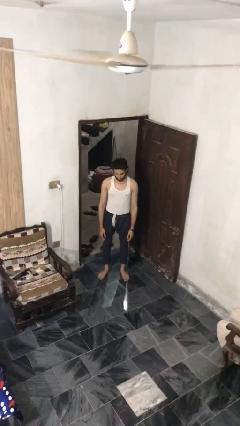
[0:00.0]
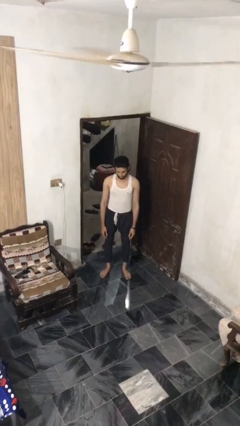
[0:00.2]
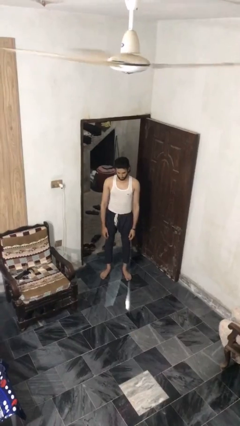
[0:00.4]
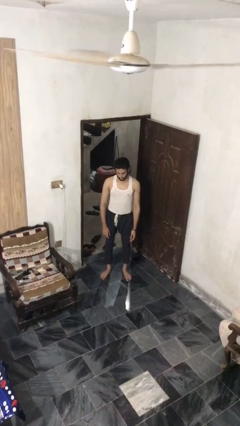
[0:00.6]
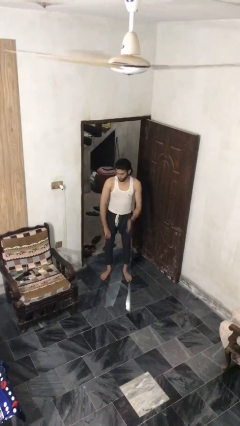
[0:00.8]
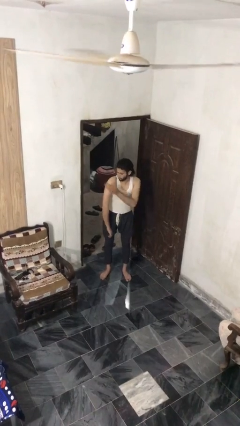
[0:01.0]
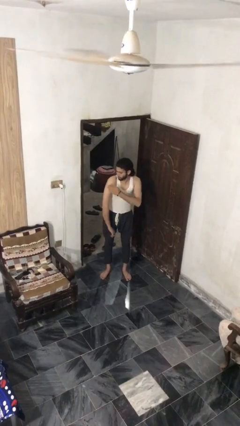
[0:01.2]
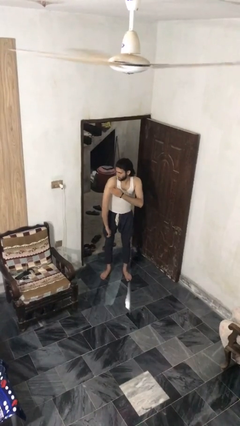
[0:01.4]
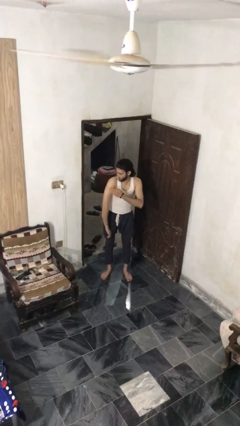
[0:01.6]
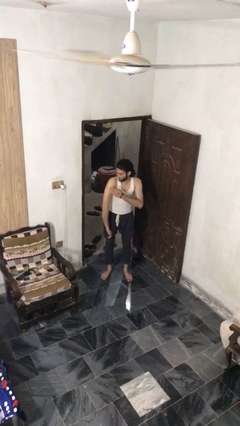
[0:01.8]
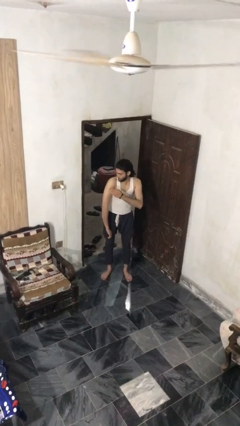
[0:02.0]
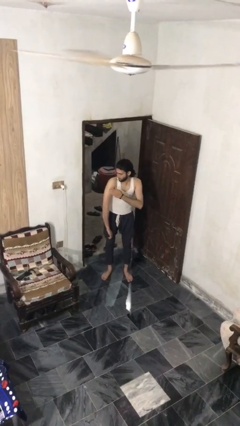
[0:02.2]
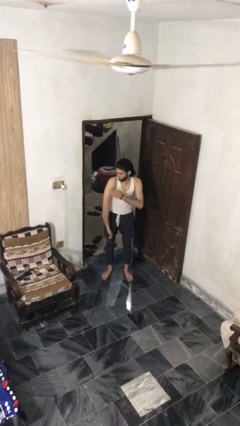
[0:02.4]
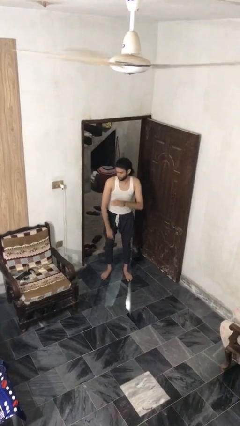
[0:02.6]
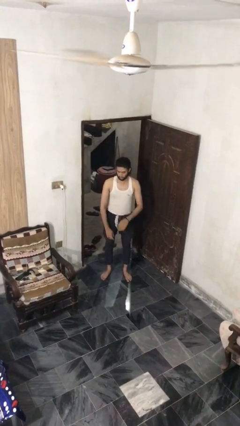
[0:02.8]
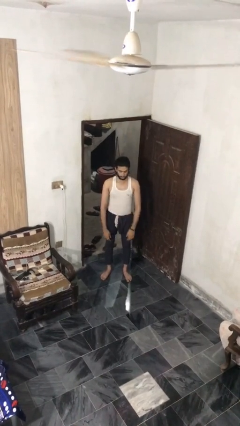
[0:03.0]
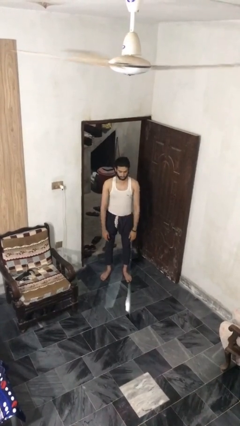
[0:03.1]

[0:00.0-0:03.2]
person swats bug

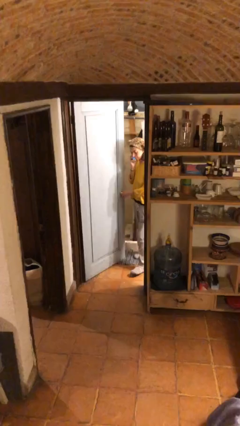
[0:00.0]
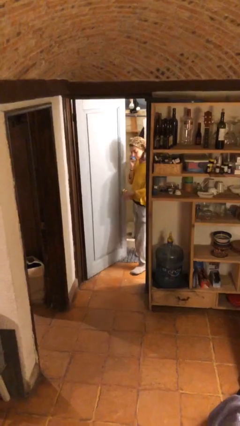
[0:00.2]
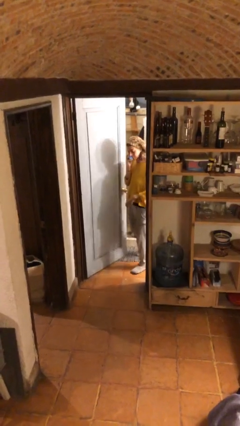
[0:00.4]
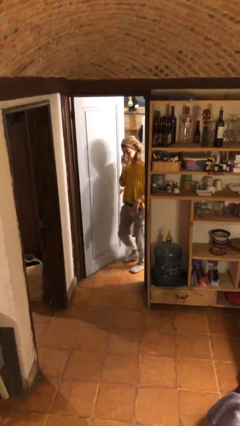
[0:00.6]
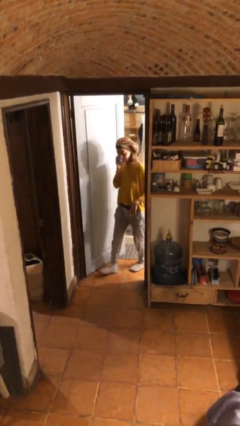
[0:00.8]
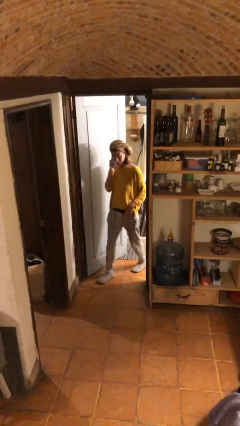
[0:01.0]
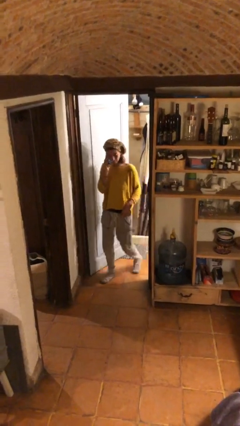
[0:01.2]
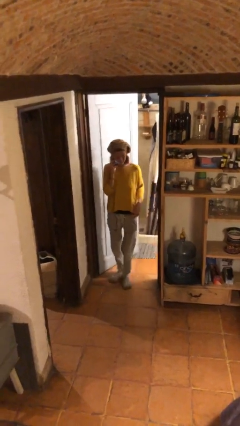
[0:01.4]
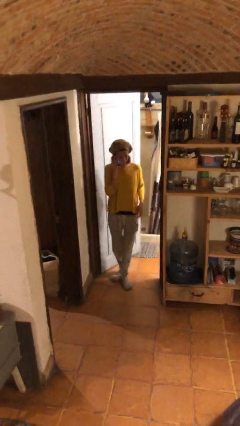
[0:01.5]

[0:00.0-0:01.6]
person enters scene through structure

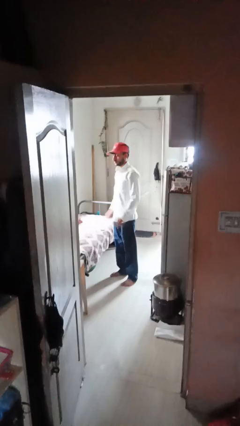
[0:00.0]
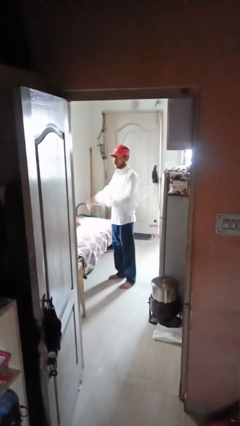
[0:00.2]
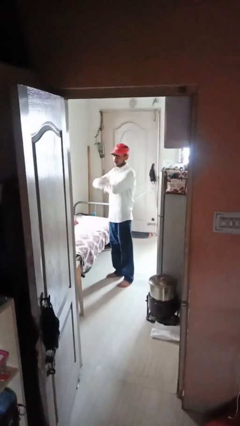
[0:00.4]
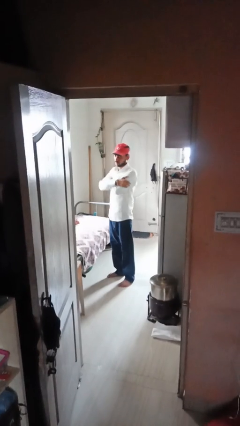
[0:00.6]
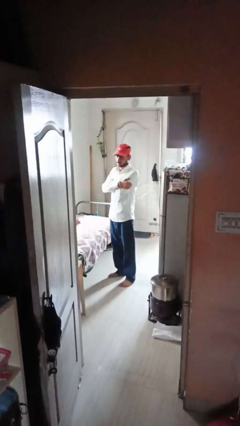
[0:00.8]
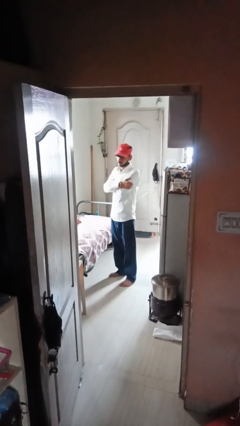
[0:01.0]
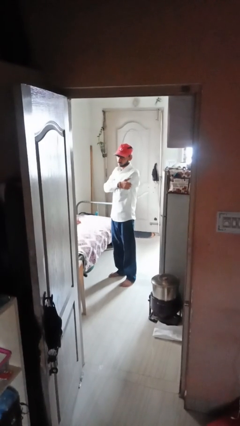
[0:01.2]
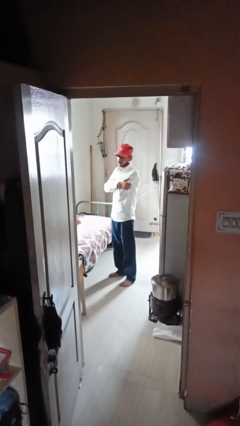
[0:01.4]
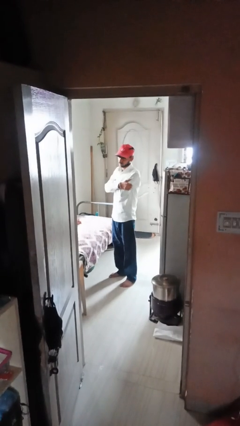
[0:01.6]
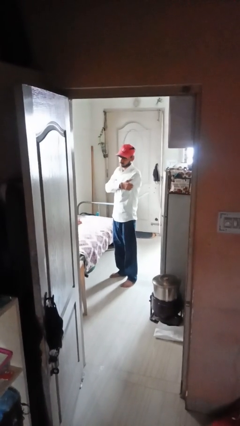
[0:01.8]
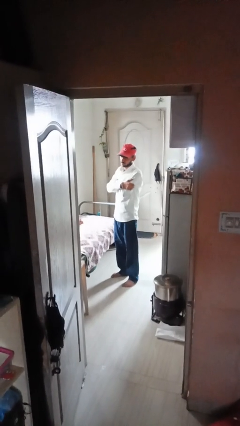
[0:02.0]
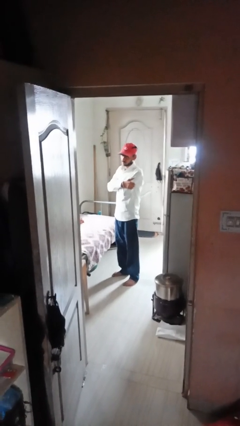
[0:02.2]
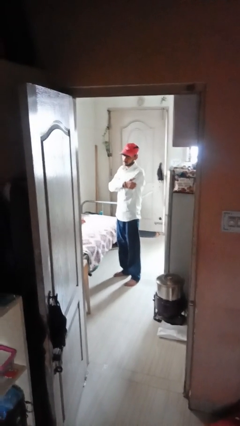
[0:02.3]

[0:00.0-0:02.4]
person crosses arms

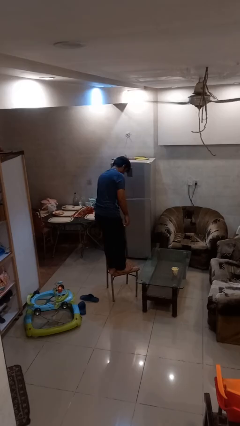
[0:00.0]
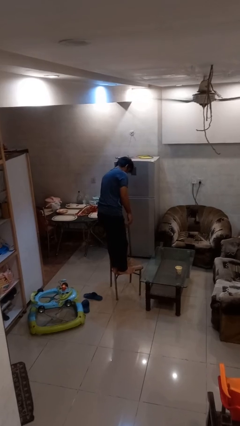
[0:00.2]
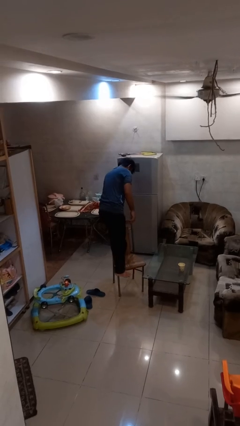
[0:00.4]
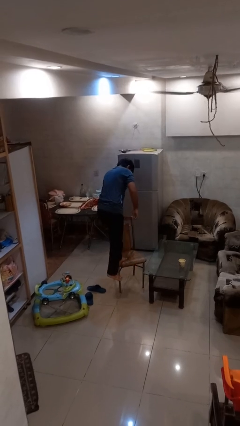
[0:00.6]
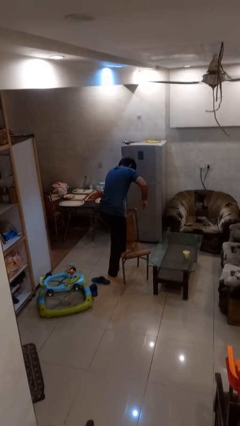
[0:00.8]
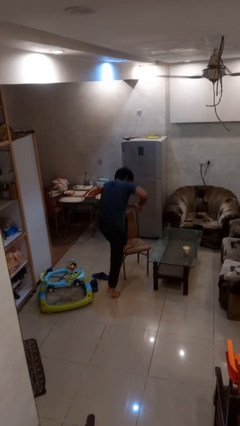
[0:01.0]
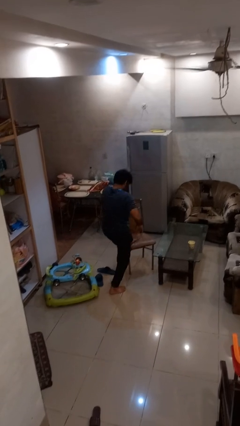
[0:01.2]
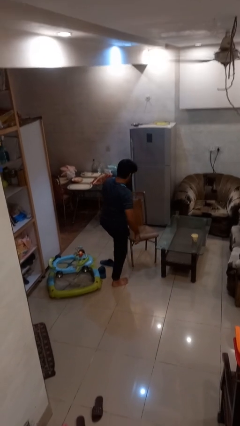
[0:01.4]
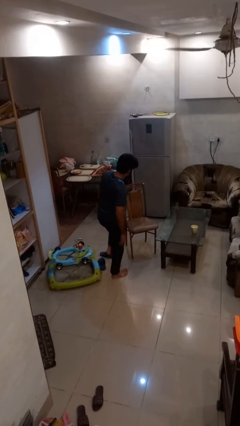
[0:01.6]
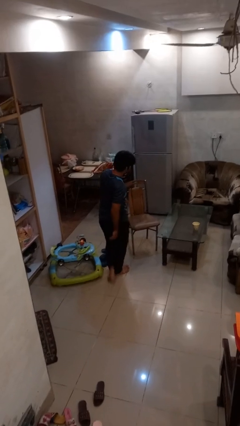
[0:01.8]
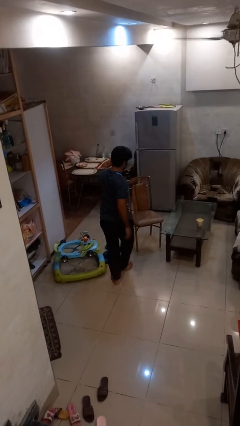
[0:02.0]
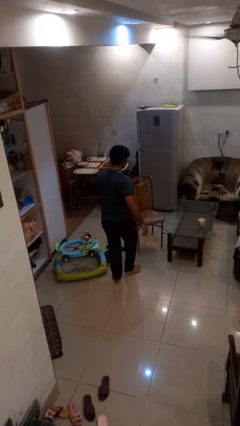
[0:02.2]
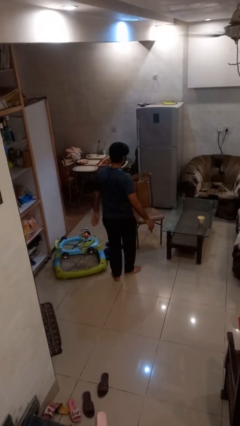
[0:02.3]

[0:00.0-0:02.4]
person climbs off chair

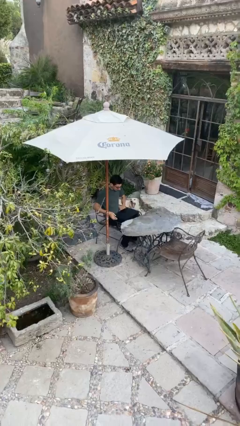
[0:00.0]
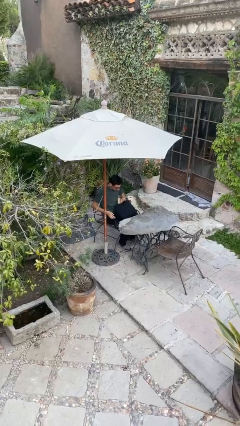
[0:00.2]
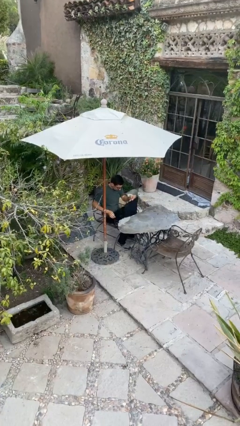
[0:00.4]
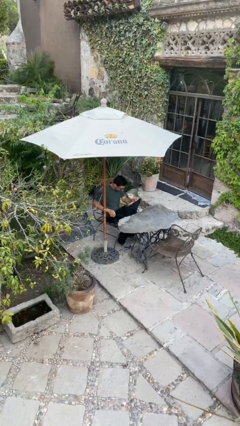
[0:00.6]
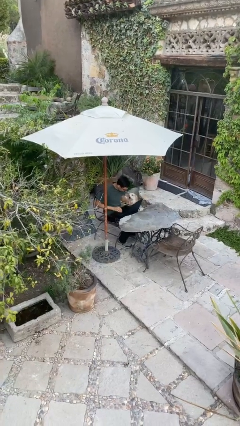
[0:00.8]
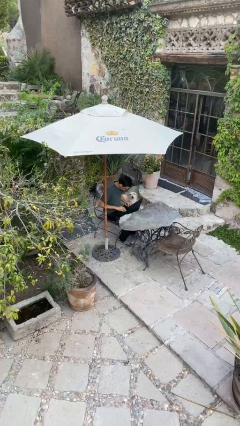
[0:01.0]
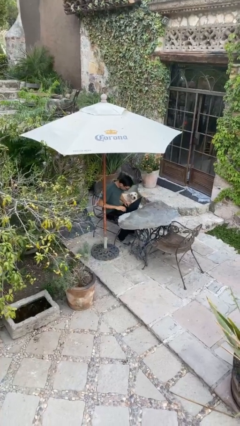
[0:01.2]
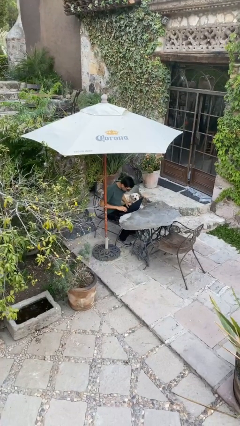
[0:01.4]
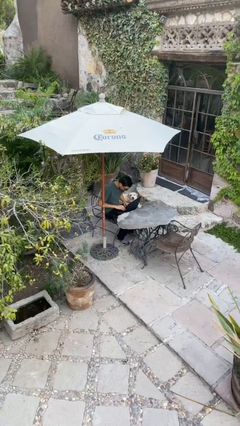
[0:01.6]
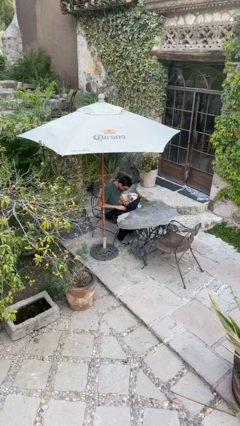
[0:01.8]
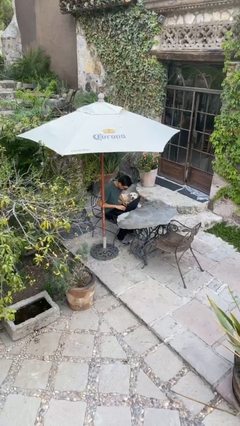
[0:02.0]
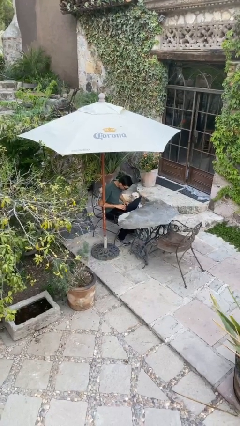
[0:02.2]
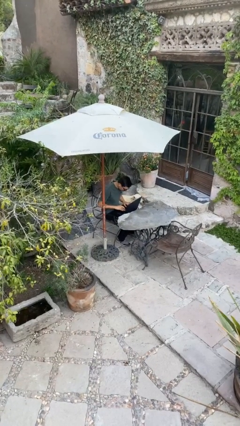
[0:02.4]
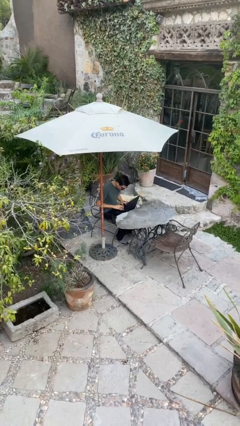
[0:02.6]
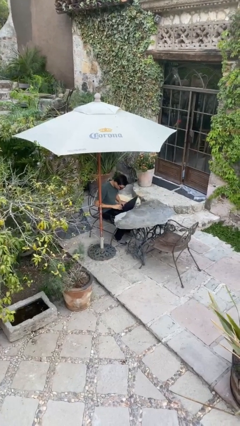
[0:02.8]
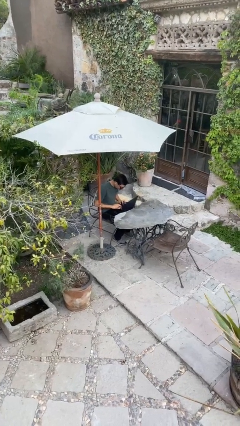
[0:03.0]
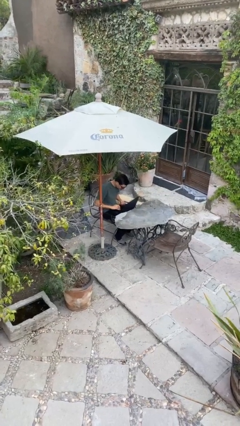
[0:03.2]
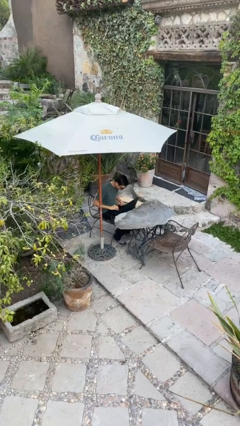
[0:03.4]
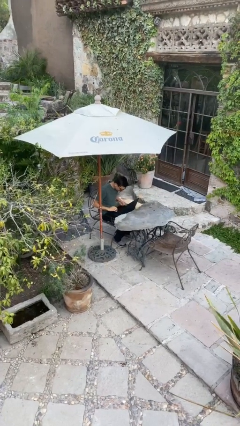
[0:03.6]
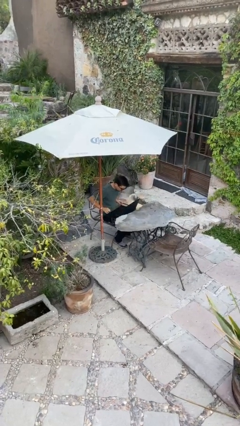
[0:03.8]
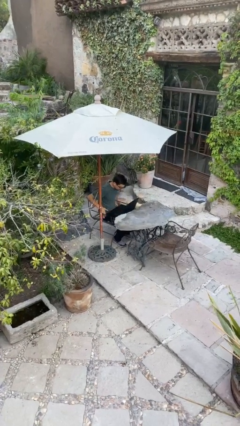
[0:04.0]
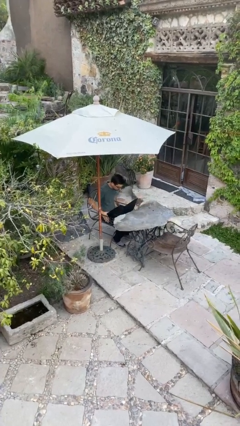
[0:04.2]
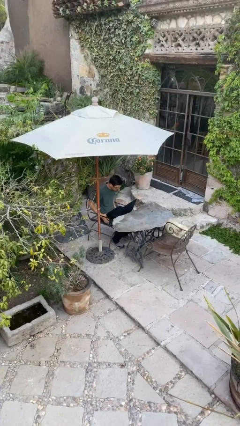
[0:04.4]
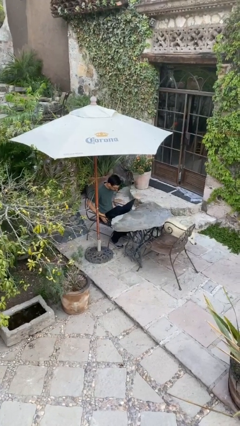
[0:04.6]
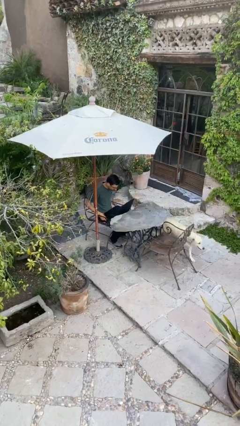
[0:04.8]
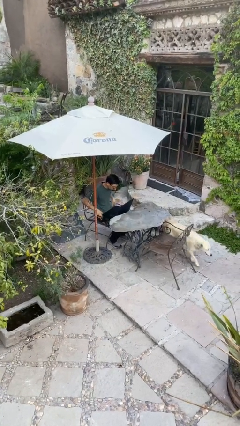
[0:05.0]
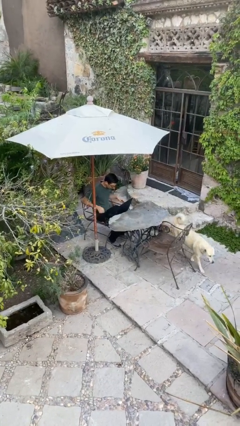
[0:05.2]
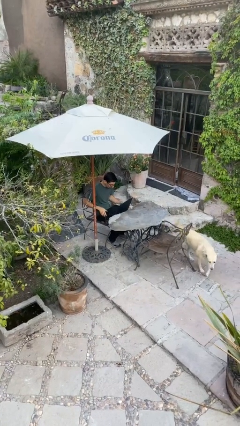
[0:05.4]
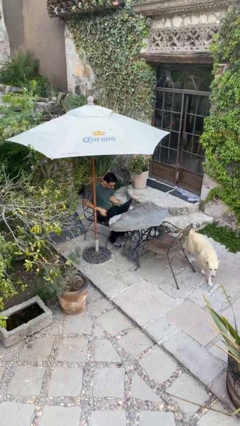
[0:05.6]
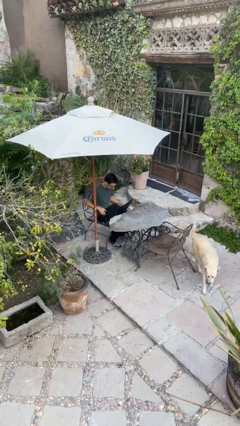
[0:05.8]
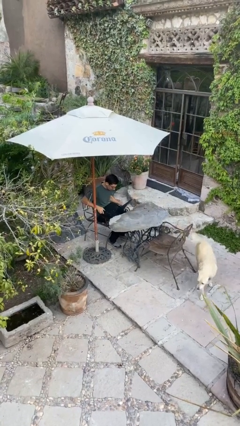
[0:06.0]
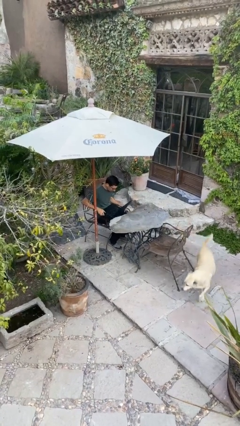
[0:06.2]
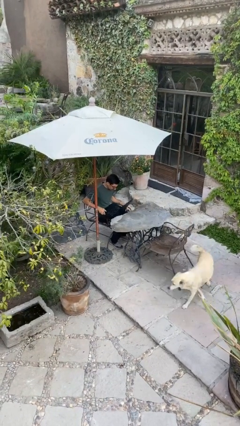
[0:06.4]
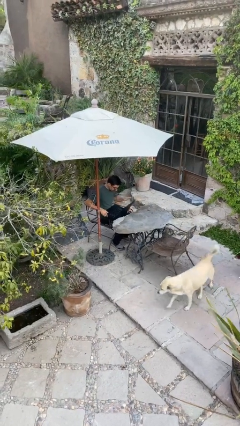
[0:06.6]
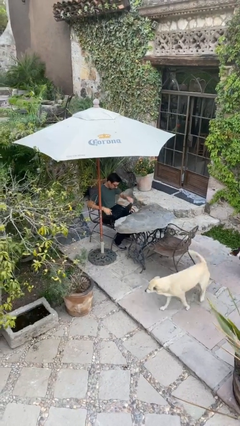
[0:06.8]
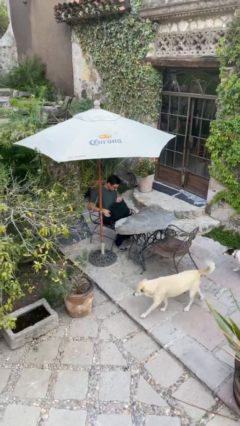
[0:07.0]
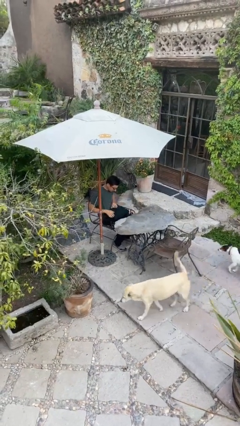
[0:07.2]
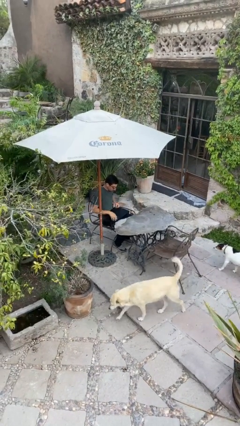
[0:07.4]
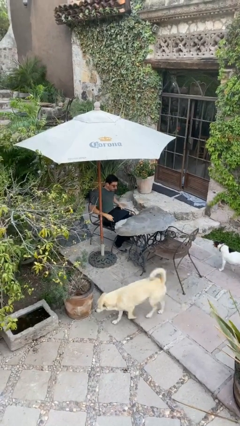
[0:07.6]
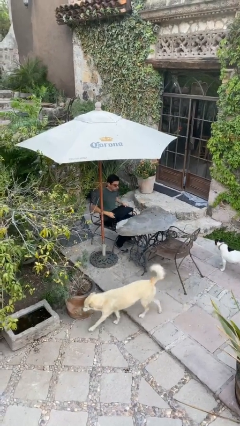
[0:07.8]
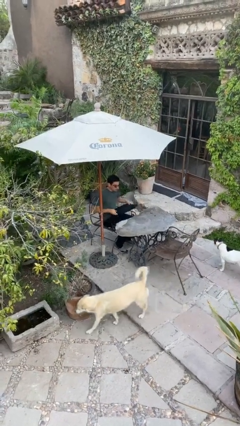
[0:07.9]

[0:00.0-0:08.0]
person interacts with laptop

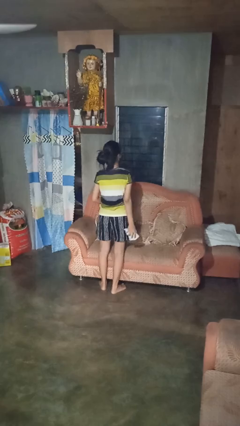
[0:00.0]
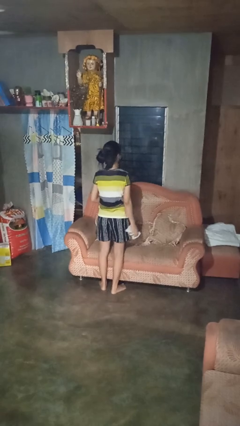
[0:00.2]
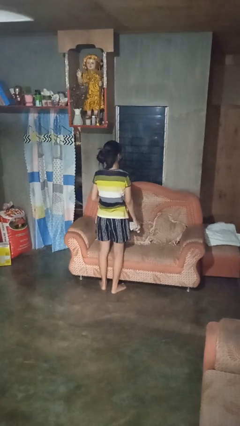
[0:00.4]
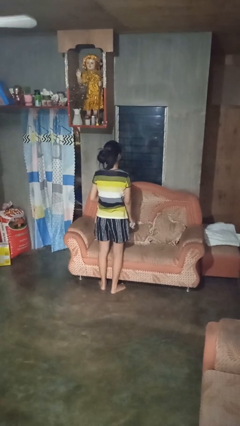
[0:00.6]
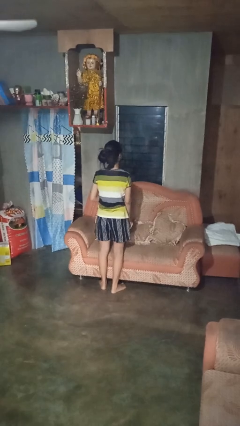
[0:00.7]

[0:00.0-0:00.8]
person sprays from bottle
